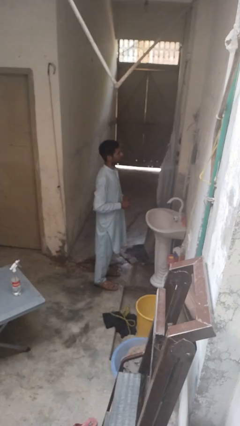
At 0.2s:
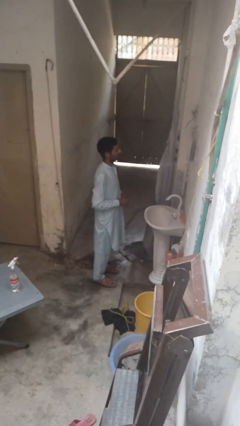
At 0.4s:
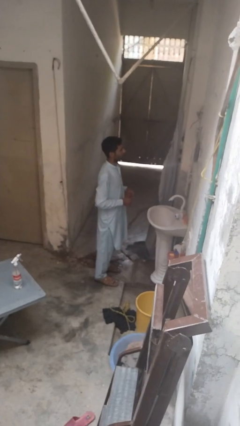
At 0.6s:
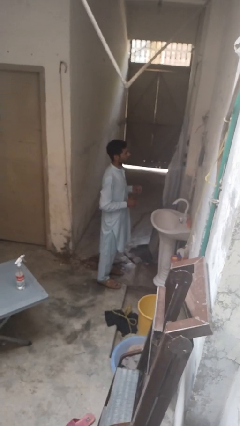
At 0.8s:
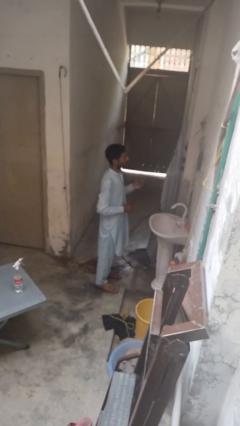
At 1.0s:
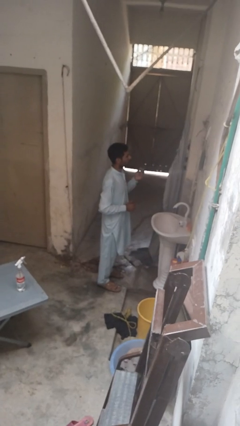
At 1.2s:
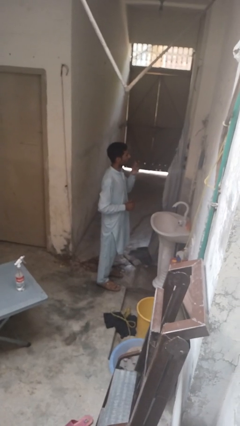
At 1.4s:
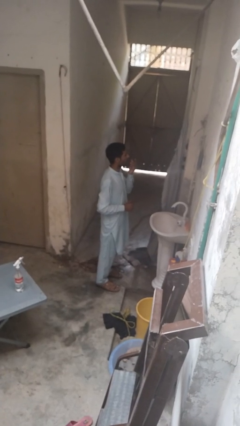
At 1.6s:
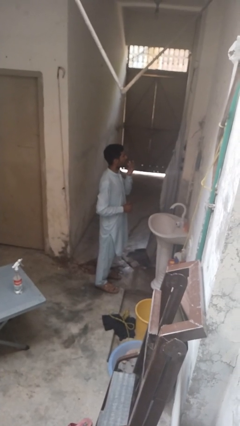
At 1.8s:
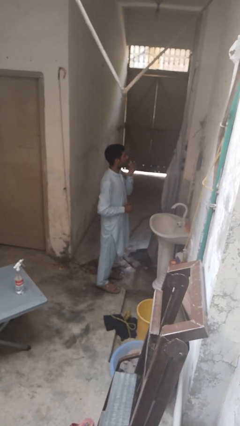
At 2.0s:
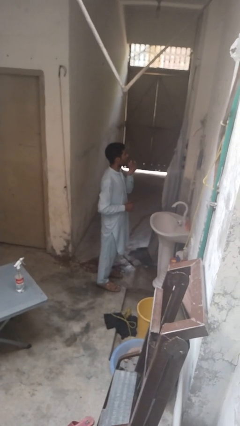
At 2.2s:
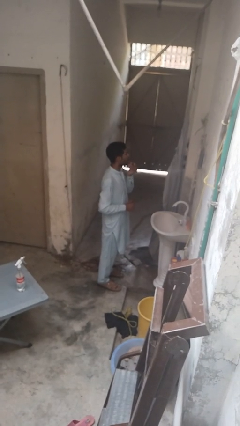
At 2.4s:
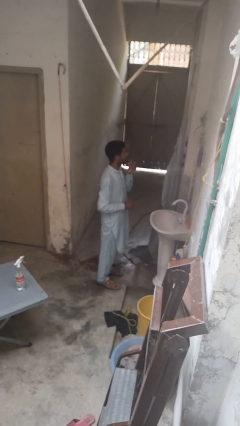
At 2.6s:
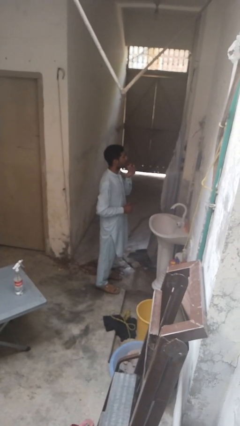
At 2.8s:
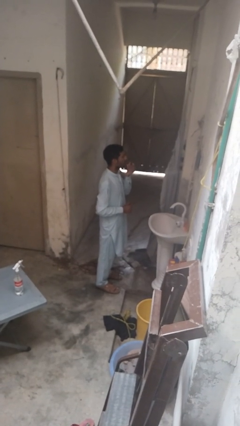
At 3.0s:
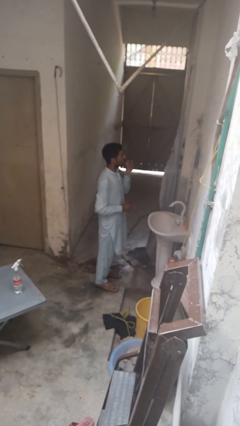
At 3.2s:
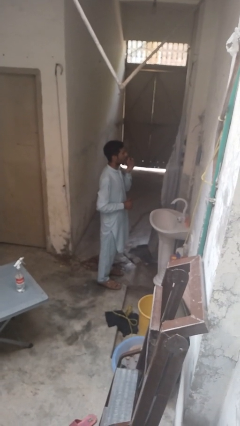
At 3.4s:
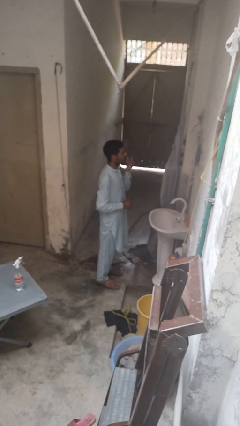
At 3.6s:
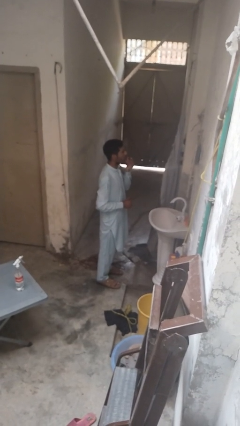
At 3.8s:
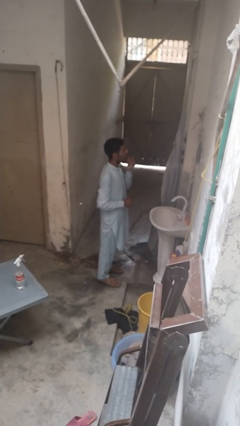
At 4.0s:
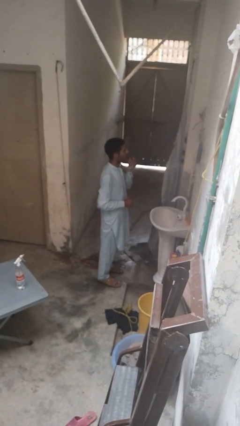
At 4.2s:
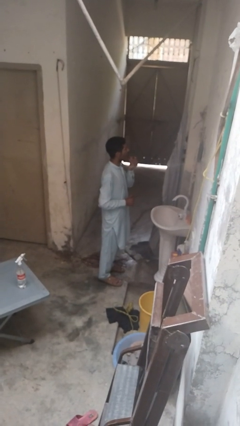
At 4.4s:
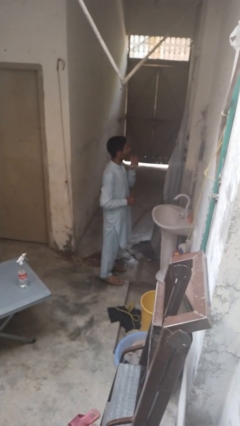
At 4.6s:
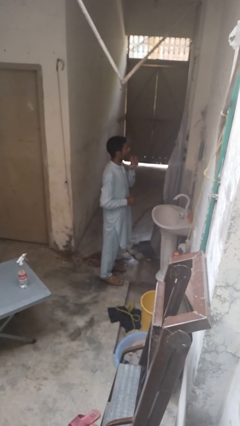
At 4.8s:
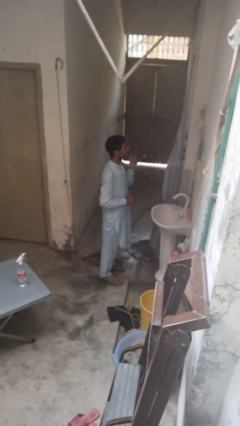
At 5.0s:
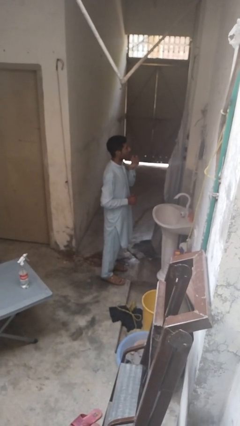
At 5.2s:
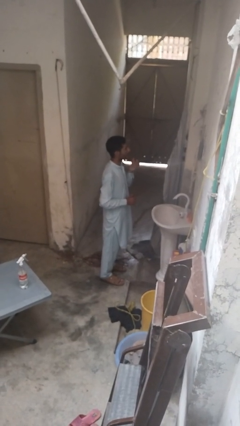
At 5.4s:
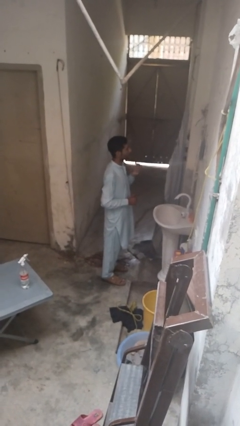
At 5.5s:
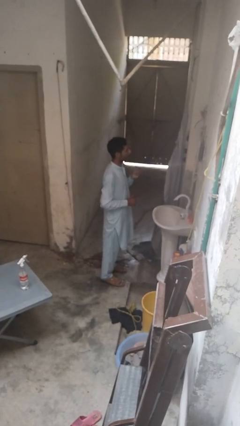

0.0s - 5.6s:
person applies lip makeup

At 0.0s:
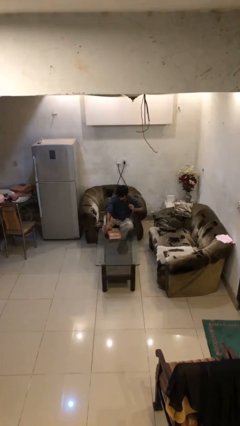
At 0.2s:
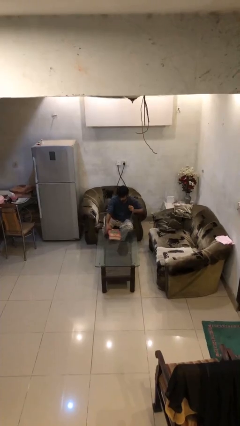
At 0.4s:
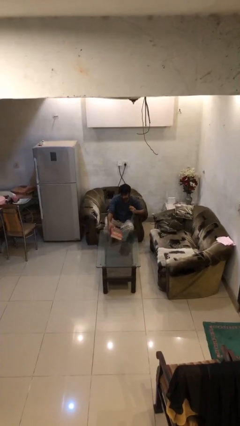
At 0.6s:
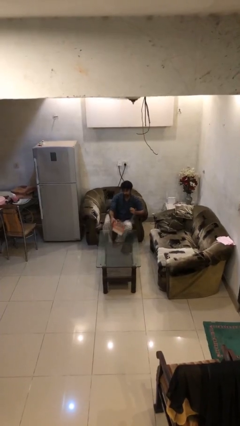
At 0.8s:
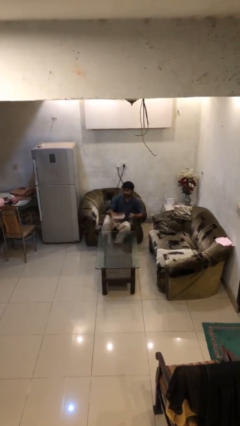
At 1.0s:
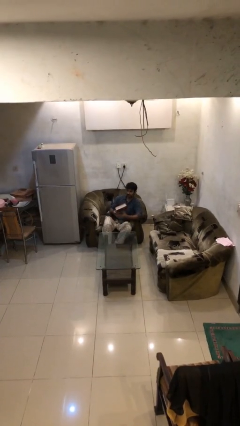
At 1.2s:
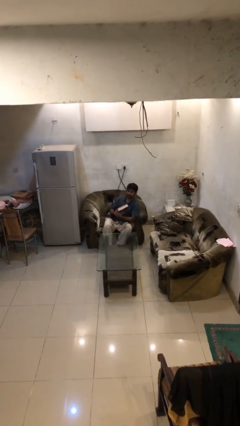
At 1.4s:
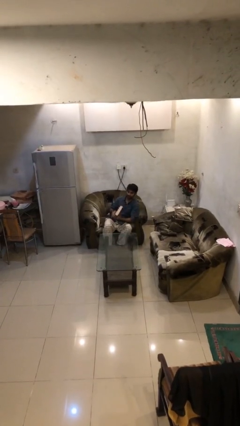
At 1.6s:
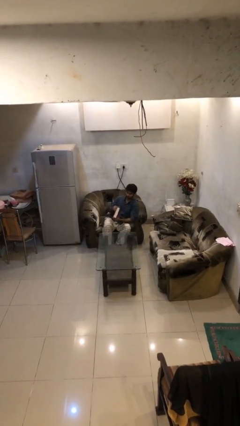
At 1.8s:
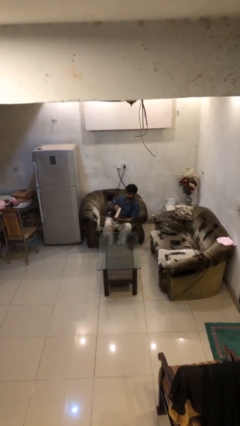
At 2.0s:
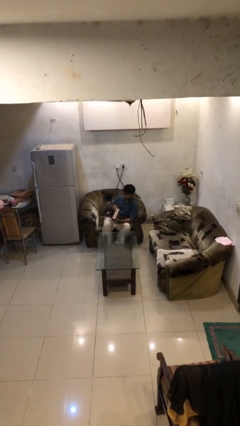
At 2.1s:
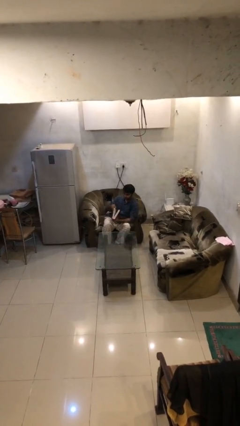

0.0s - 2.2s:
person picks up object from table

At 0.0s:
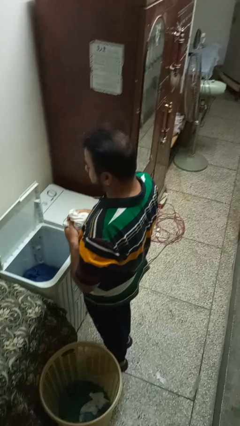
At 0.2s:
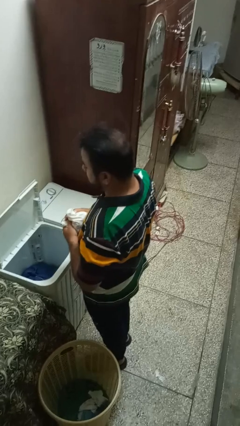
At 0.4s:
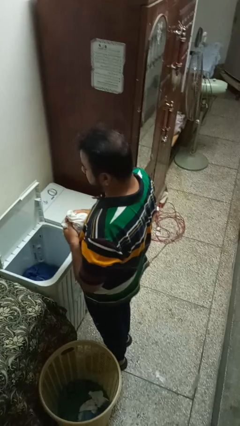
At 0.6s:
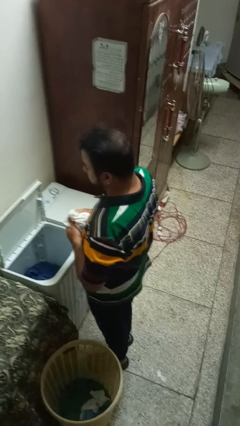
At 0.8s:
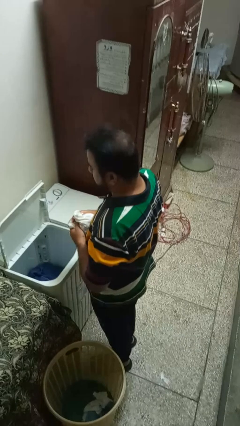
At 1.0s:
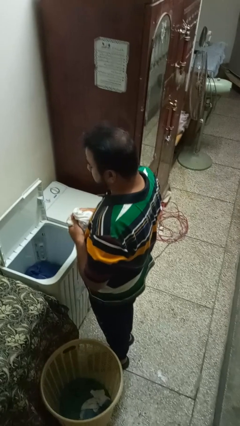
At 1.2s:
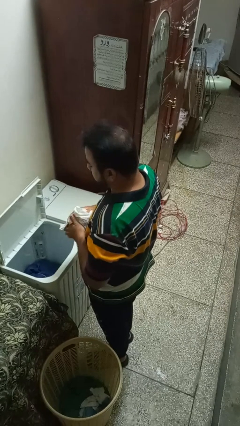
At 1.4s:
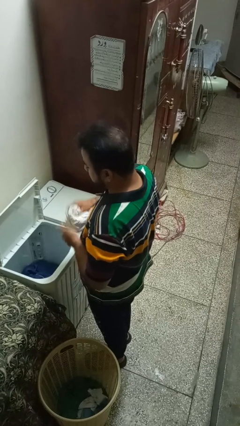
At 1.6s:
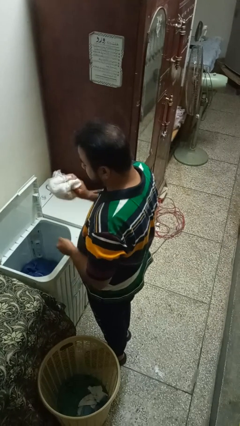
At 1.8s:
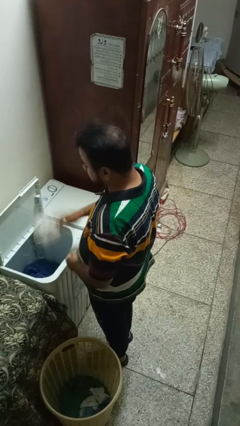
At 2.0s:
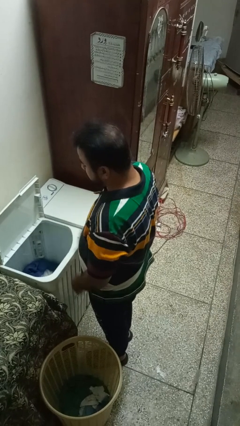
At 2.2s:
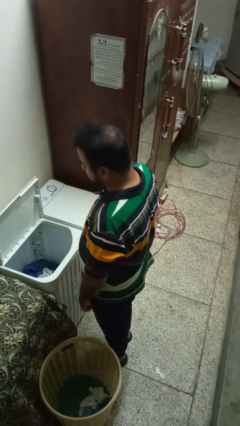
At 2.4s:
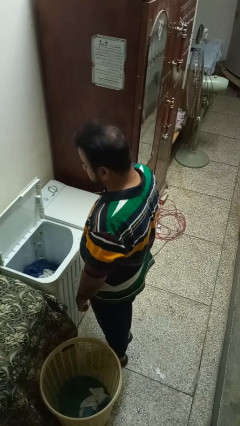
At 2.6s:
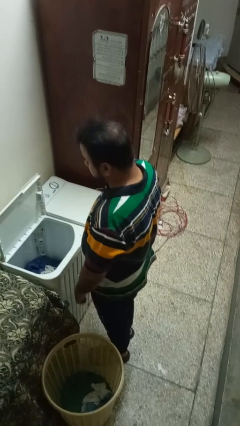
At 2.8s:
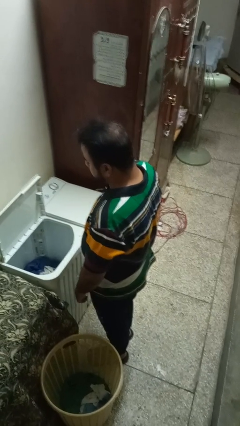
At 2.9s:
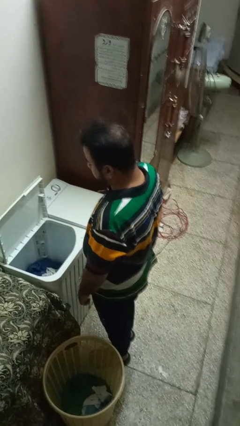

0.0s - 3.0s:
person loads clotheswasher

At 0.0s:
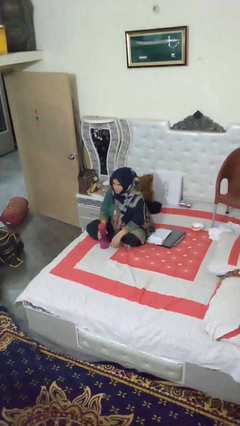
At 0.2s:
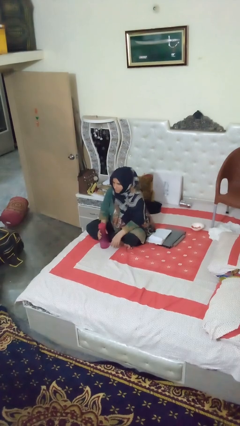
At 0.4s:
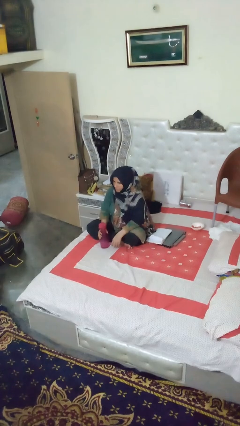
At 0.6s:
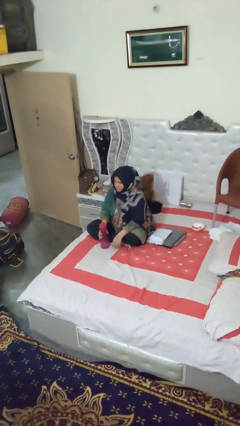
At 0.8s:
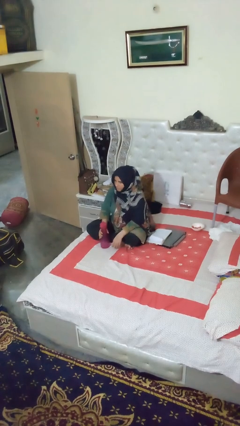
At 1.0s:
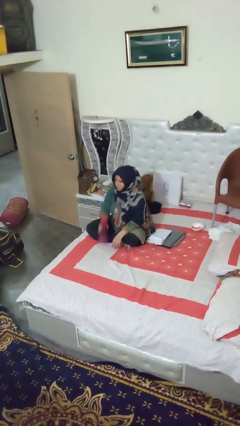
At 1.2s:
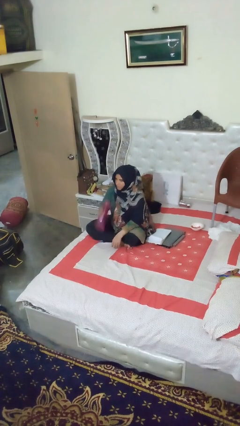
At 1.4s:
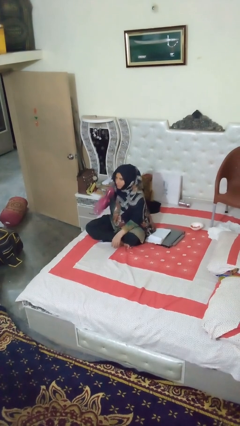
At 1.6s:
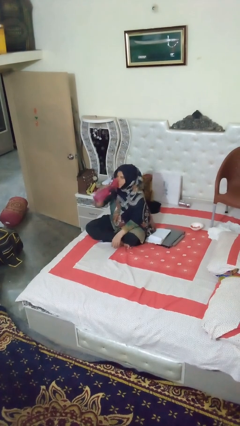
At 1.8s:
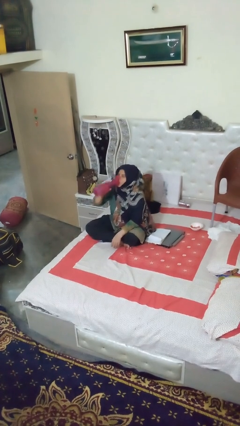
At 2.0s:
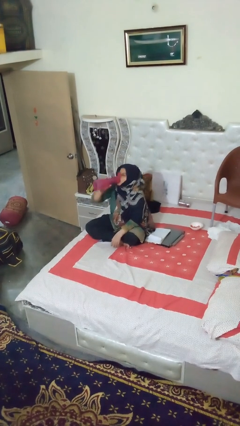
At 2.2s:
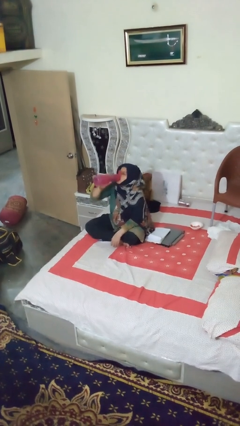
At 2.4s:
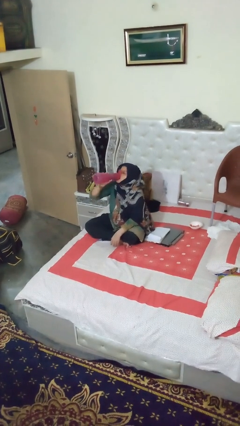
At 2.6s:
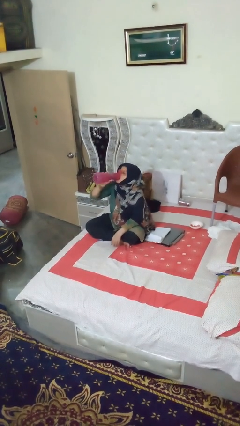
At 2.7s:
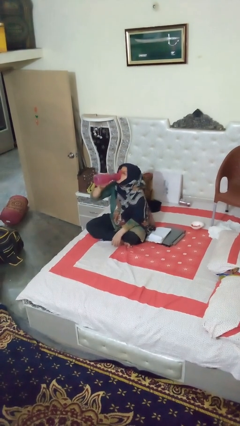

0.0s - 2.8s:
person drinks from bottle

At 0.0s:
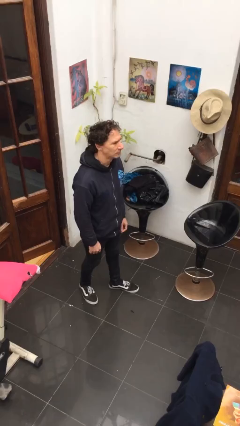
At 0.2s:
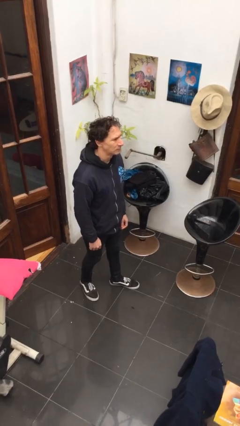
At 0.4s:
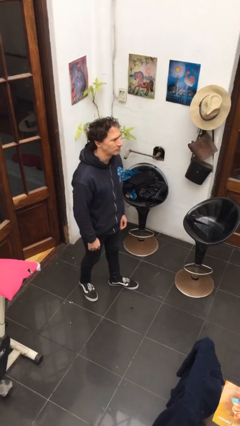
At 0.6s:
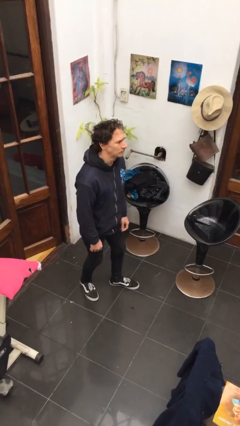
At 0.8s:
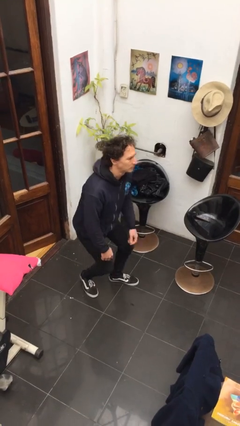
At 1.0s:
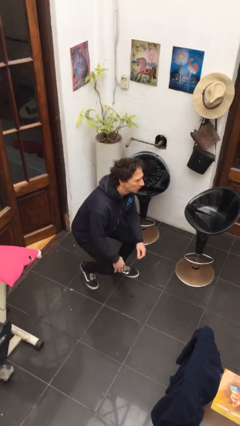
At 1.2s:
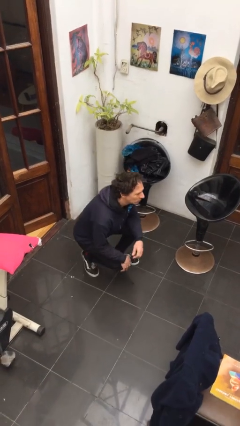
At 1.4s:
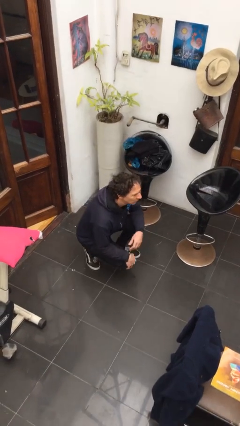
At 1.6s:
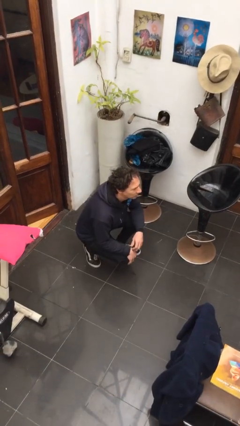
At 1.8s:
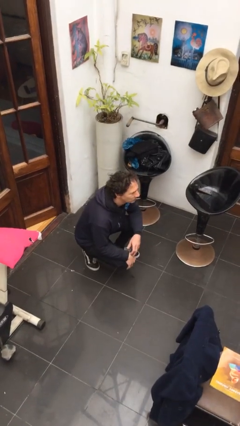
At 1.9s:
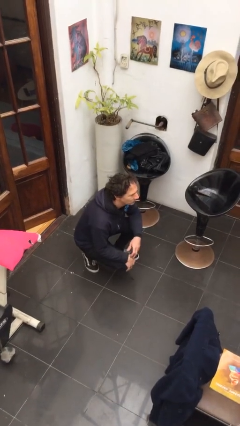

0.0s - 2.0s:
person squats

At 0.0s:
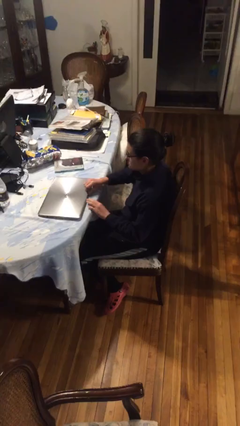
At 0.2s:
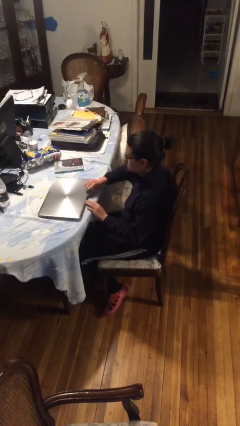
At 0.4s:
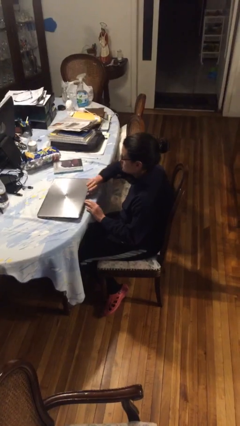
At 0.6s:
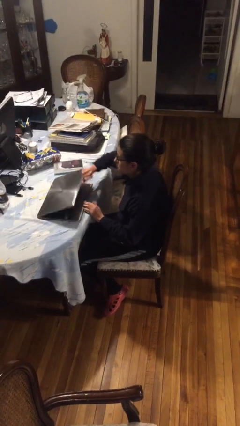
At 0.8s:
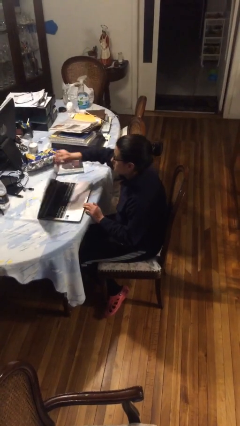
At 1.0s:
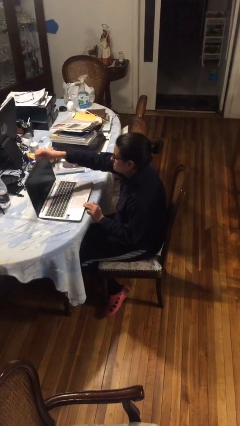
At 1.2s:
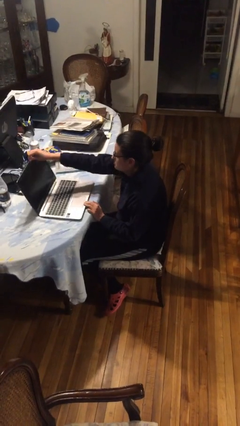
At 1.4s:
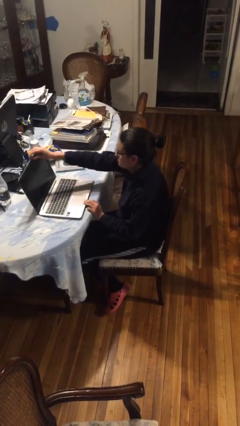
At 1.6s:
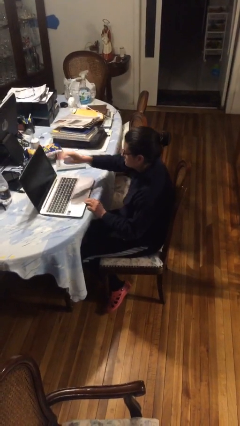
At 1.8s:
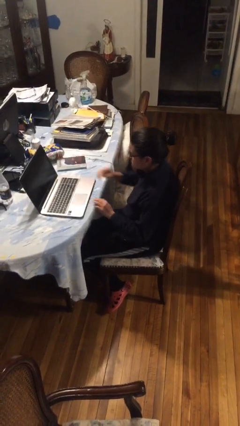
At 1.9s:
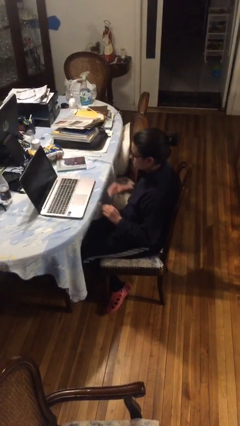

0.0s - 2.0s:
person opens laptop
